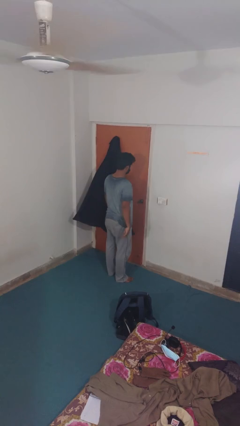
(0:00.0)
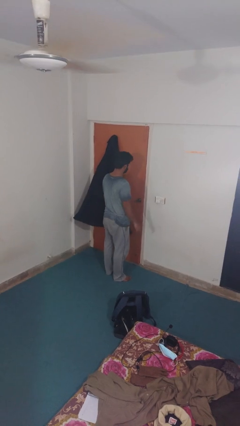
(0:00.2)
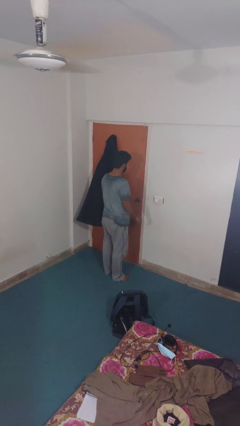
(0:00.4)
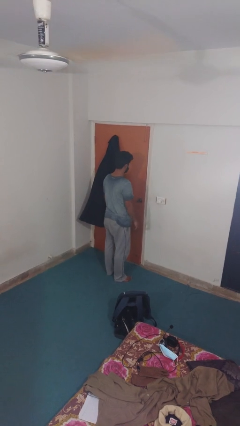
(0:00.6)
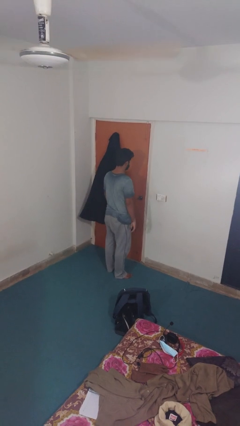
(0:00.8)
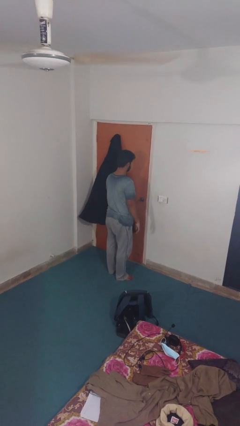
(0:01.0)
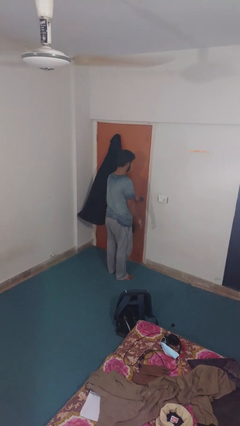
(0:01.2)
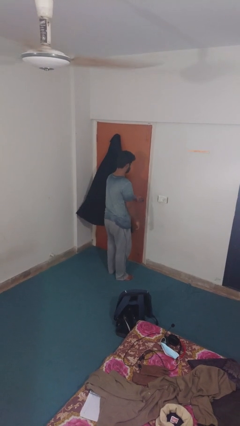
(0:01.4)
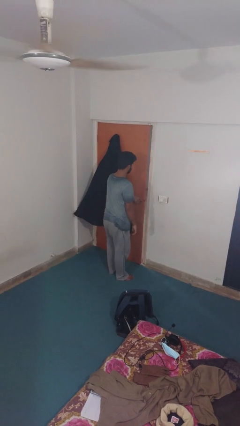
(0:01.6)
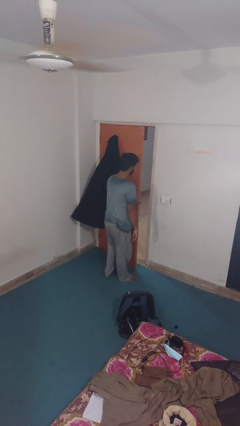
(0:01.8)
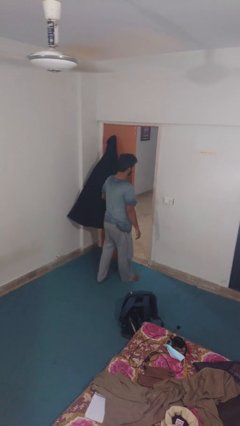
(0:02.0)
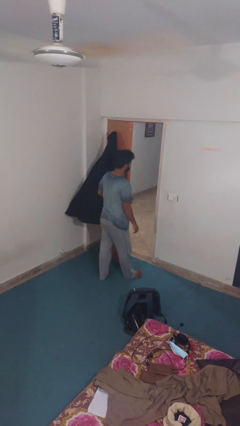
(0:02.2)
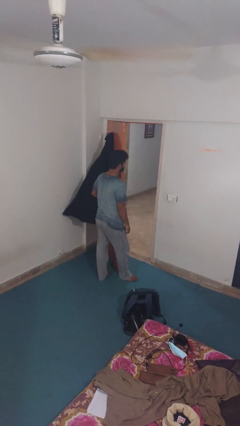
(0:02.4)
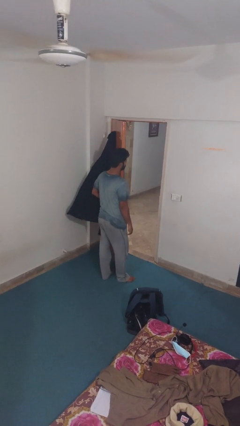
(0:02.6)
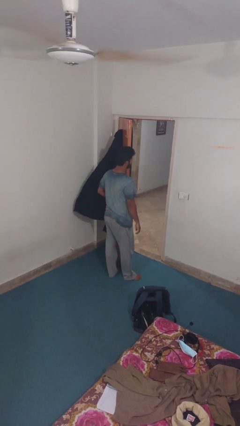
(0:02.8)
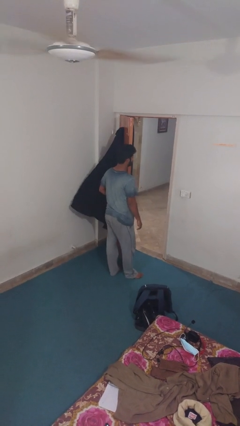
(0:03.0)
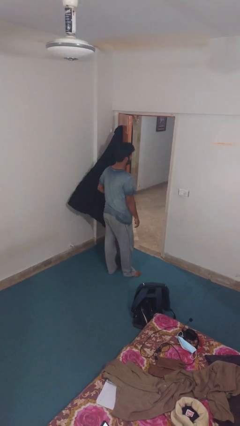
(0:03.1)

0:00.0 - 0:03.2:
person opens facility door

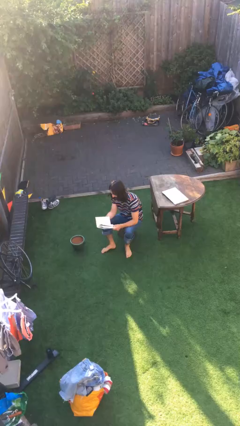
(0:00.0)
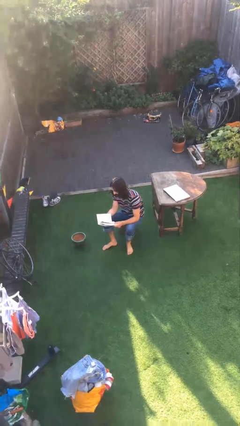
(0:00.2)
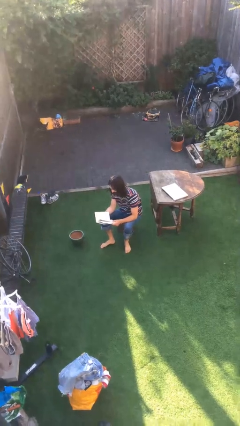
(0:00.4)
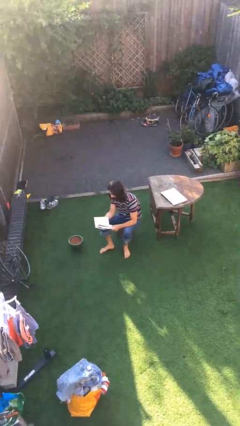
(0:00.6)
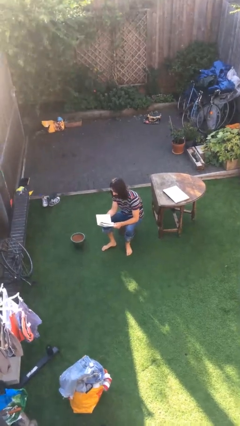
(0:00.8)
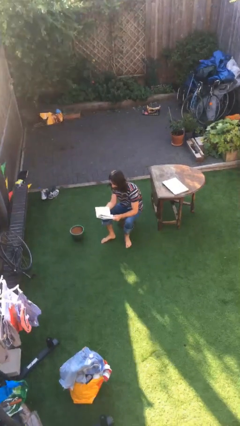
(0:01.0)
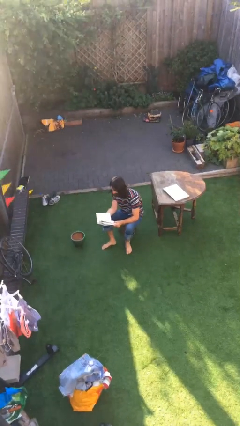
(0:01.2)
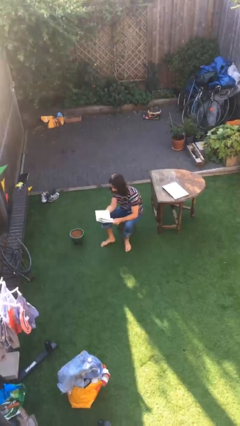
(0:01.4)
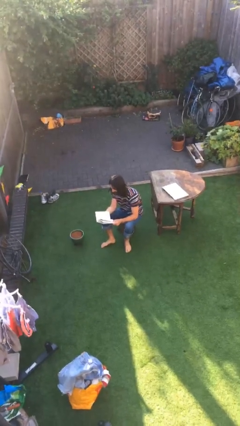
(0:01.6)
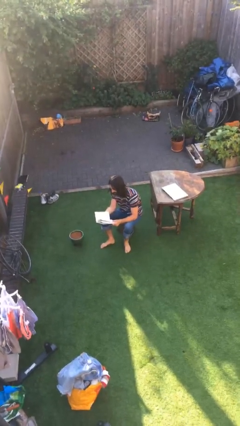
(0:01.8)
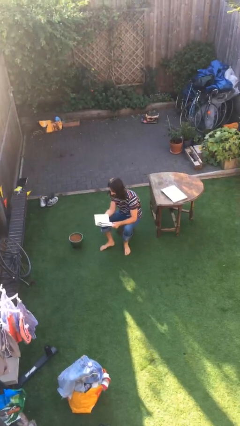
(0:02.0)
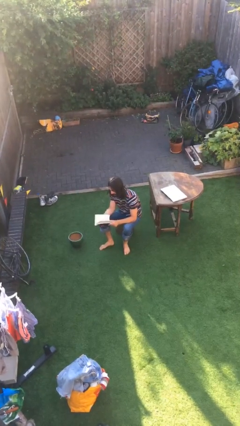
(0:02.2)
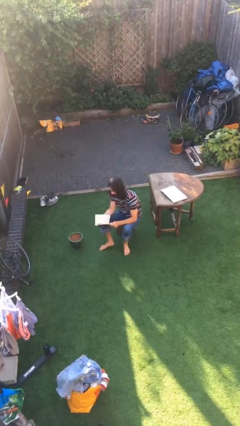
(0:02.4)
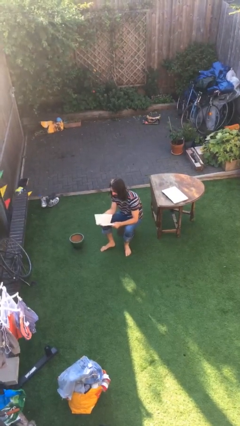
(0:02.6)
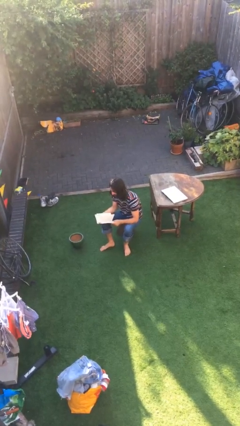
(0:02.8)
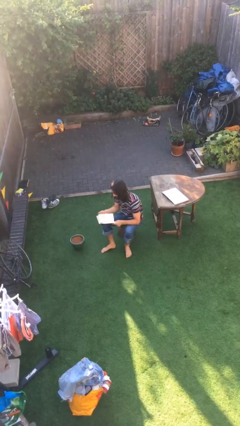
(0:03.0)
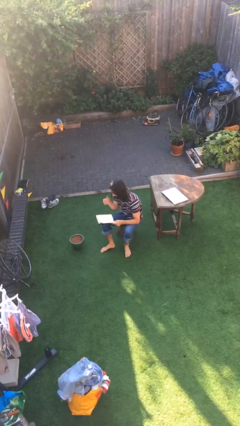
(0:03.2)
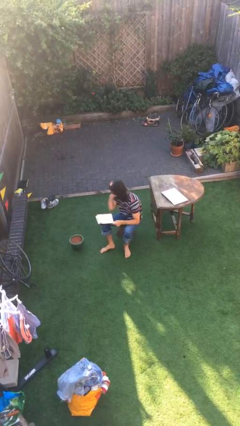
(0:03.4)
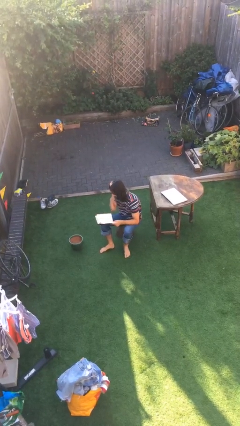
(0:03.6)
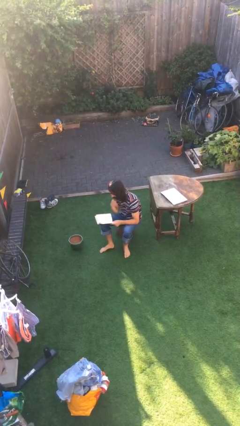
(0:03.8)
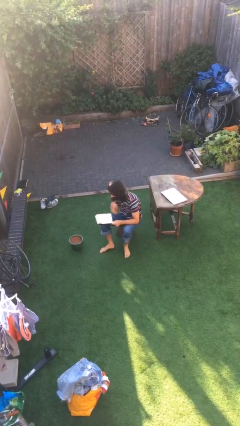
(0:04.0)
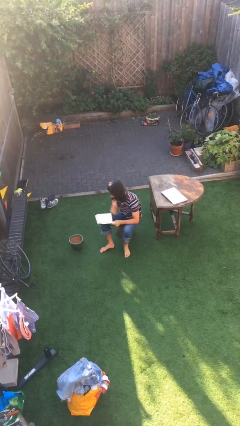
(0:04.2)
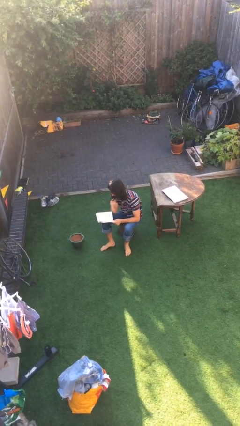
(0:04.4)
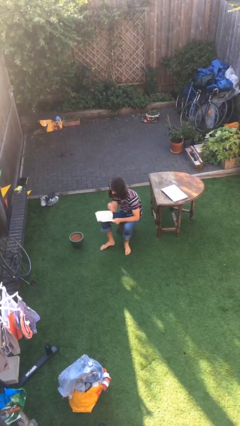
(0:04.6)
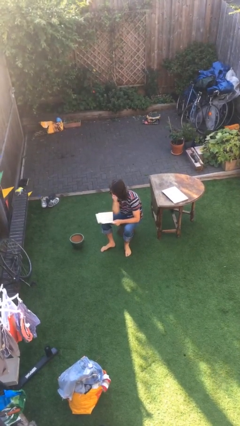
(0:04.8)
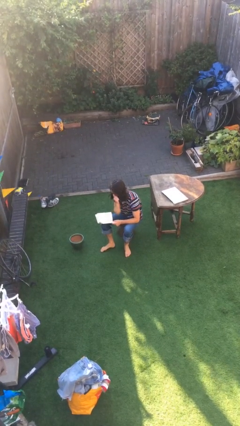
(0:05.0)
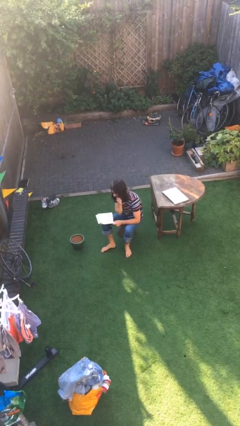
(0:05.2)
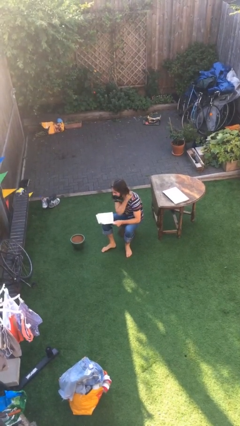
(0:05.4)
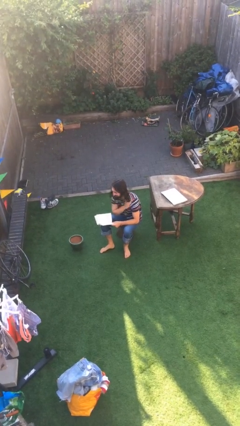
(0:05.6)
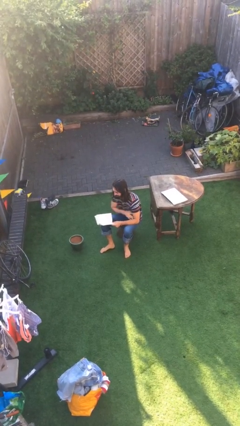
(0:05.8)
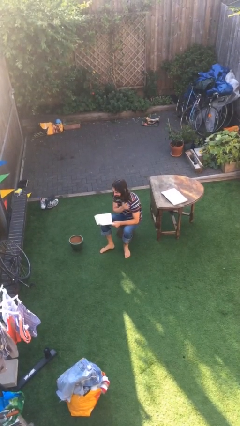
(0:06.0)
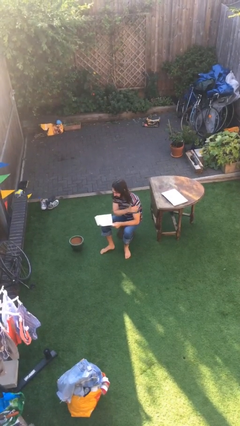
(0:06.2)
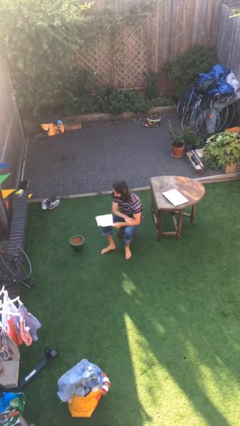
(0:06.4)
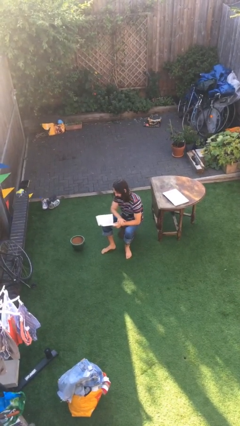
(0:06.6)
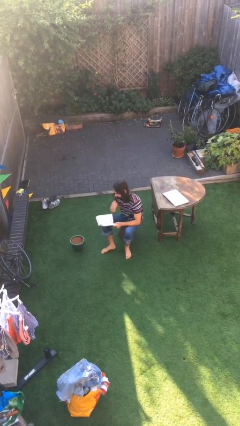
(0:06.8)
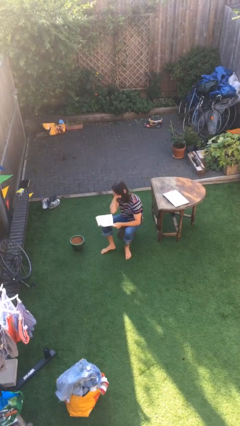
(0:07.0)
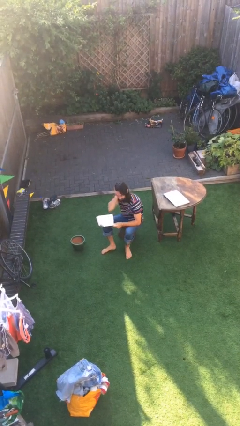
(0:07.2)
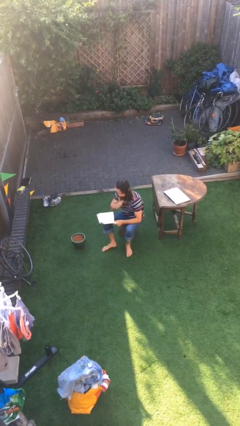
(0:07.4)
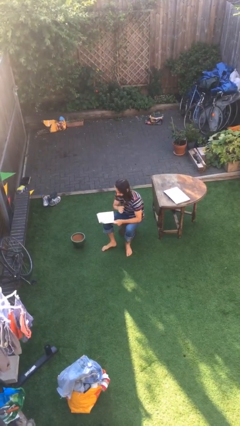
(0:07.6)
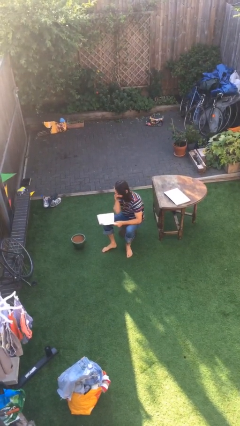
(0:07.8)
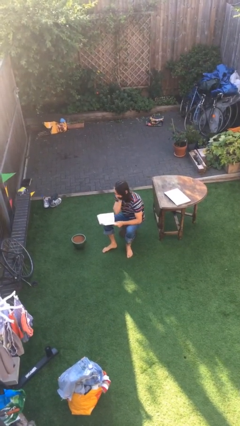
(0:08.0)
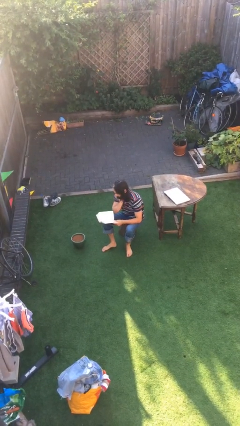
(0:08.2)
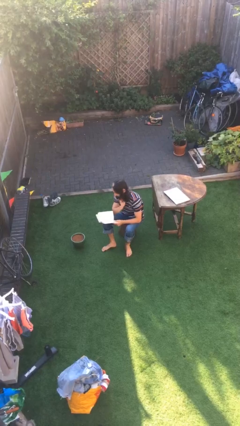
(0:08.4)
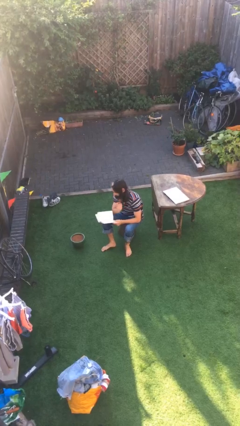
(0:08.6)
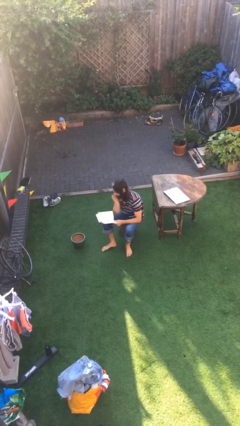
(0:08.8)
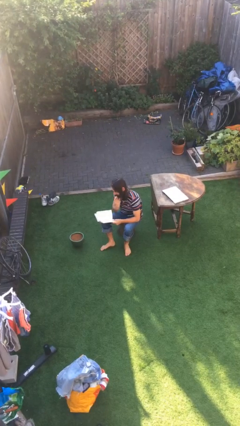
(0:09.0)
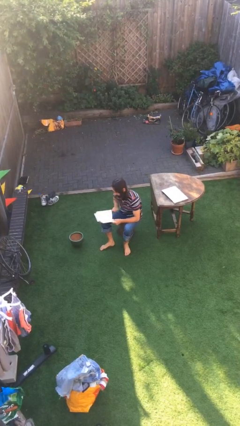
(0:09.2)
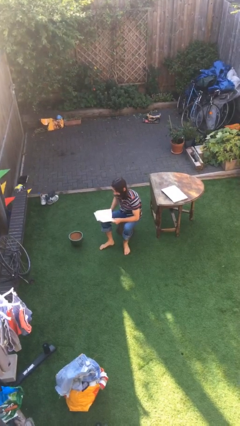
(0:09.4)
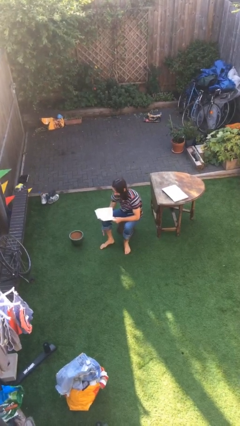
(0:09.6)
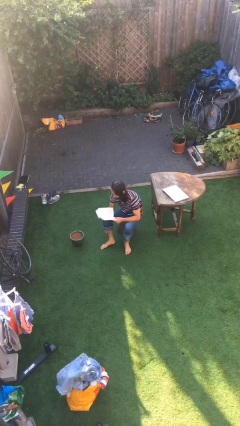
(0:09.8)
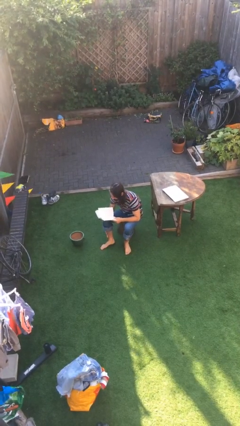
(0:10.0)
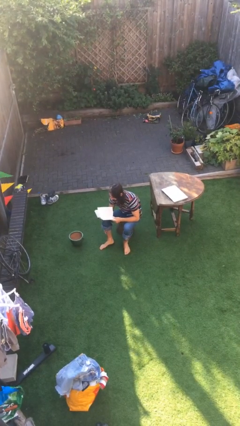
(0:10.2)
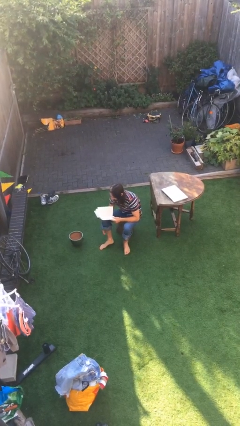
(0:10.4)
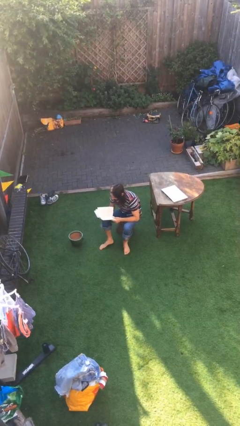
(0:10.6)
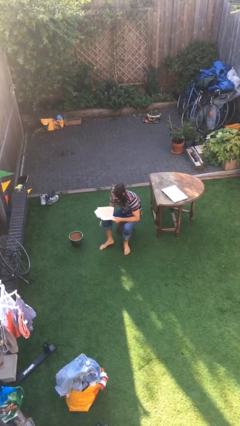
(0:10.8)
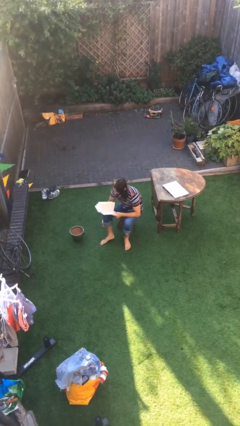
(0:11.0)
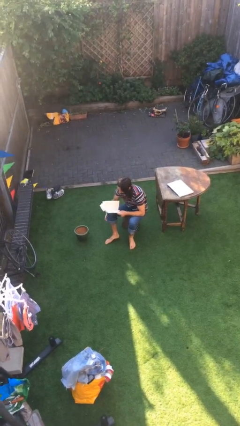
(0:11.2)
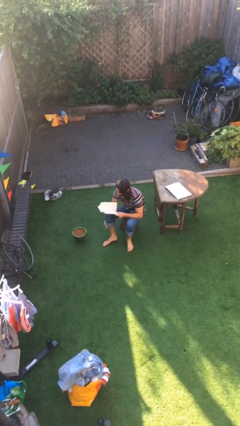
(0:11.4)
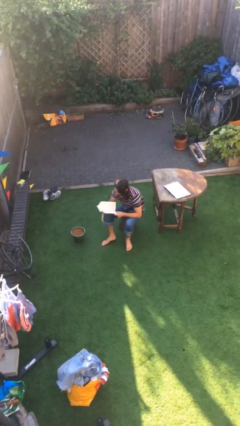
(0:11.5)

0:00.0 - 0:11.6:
person reads document

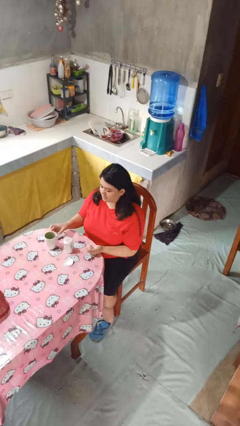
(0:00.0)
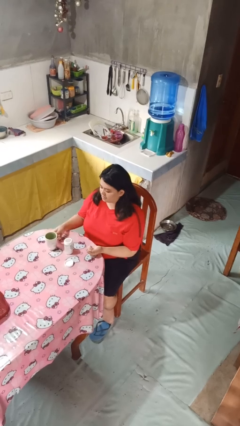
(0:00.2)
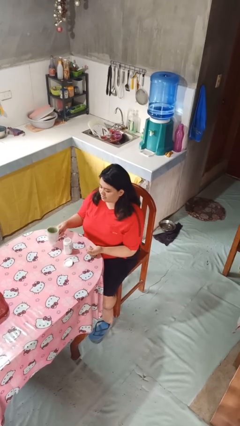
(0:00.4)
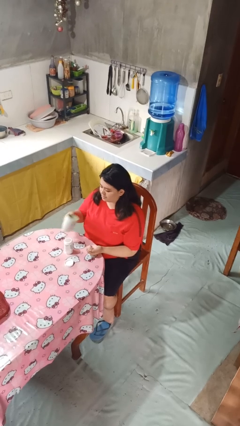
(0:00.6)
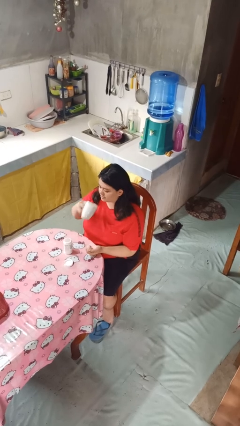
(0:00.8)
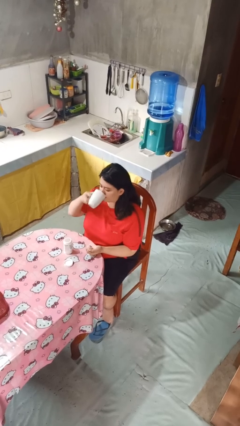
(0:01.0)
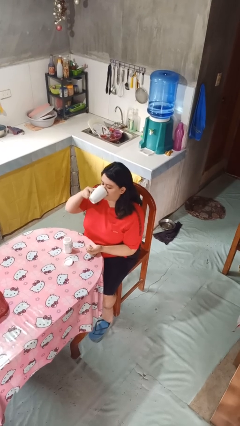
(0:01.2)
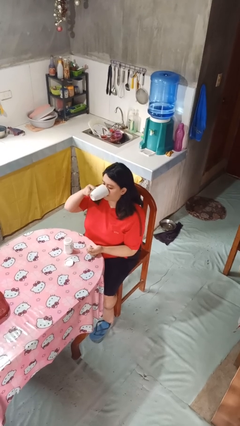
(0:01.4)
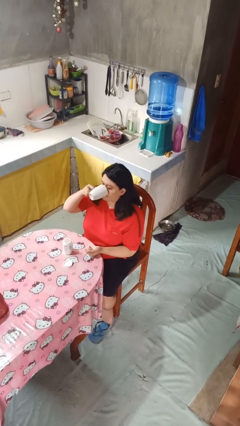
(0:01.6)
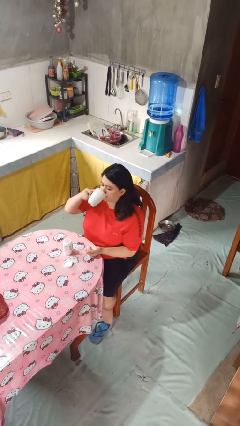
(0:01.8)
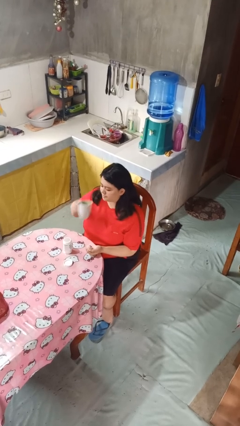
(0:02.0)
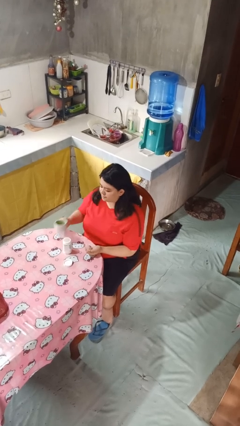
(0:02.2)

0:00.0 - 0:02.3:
person drinks from cup

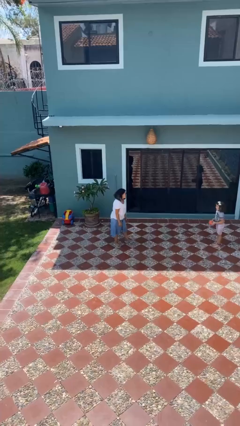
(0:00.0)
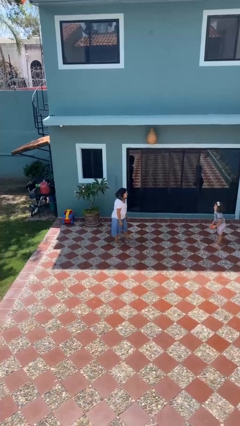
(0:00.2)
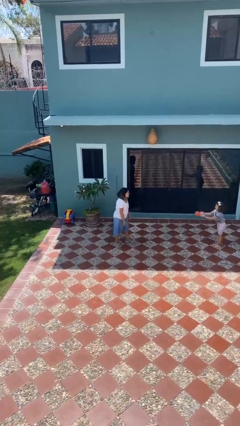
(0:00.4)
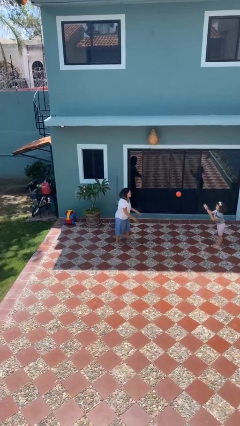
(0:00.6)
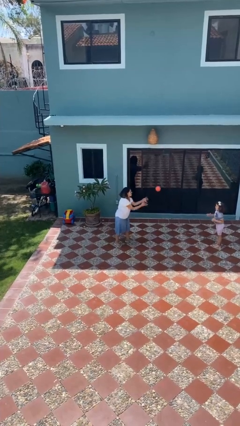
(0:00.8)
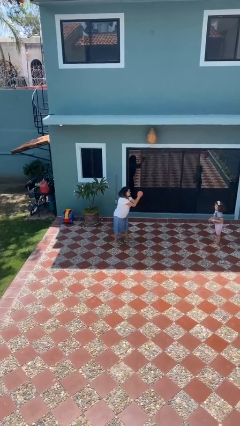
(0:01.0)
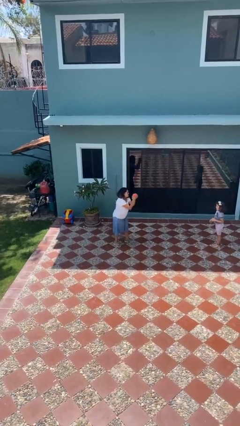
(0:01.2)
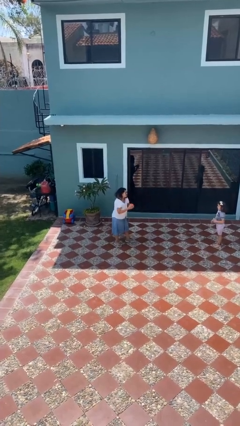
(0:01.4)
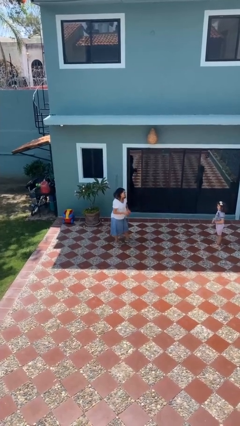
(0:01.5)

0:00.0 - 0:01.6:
person catches object from person
